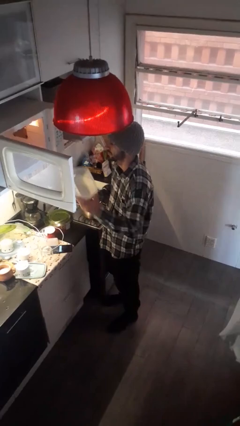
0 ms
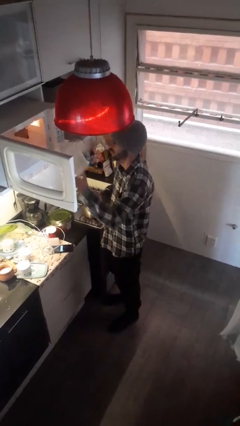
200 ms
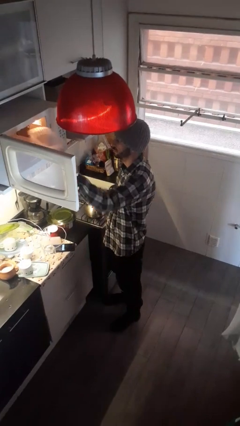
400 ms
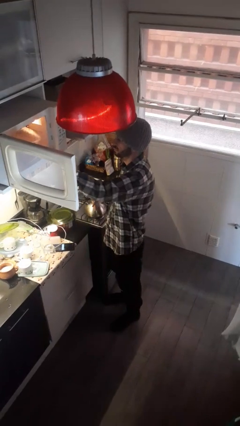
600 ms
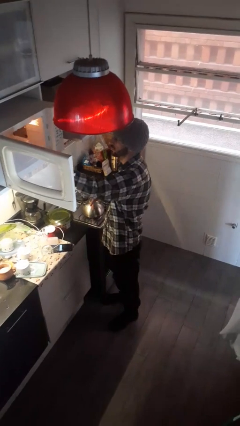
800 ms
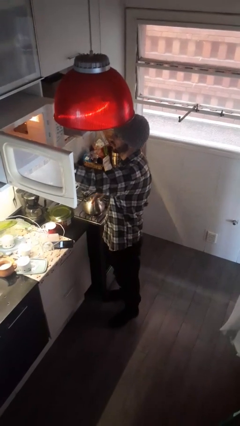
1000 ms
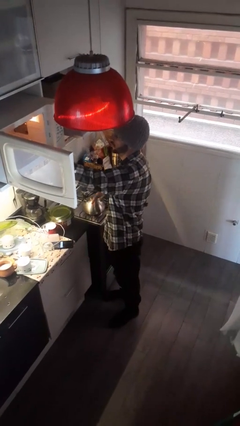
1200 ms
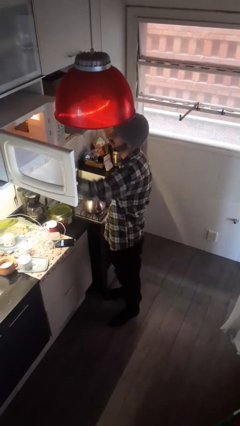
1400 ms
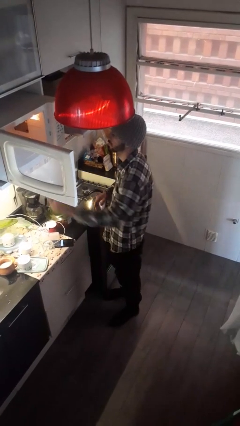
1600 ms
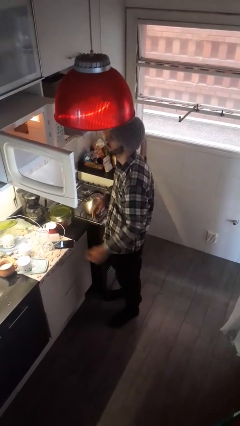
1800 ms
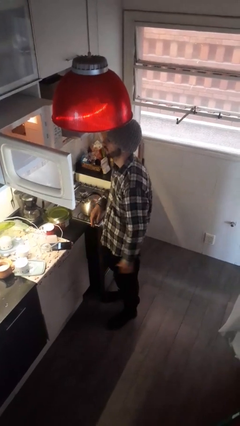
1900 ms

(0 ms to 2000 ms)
person puts object into microwave

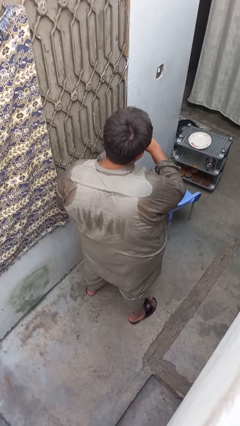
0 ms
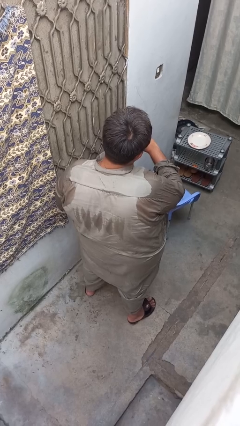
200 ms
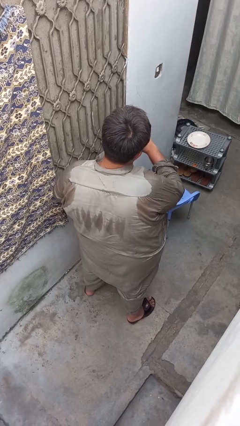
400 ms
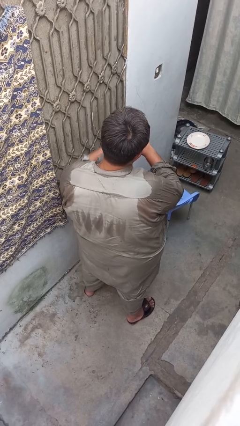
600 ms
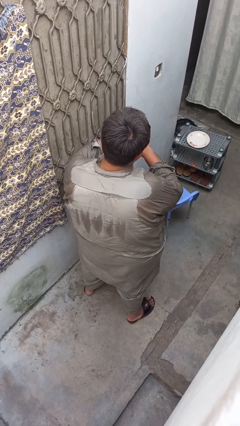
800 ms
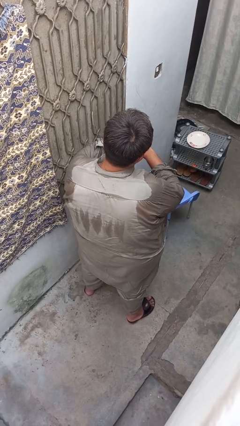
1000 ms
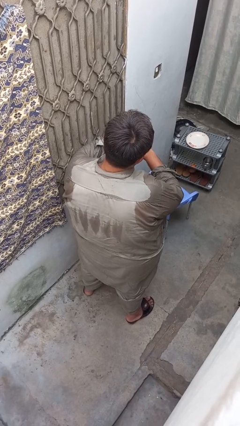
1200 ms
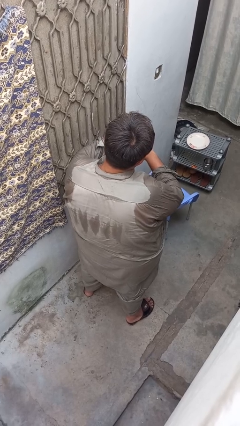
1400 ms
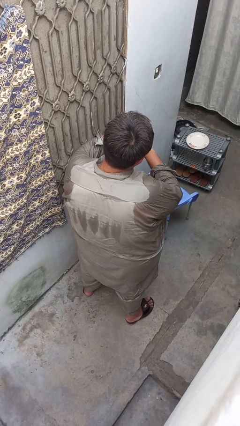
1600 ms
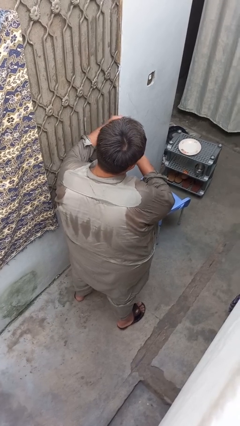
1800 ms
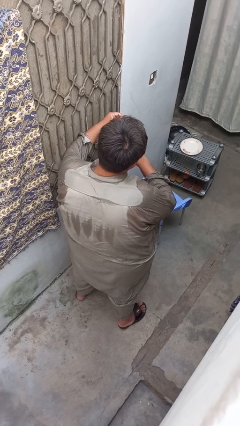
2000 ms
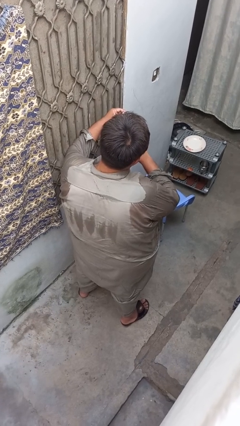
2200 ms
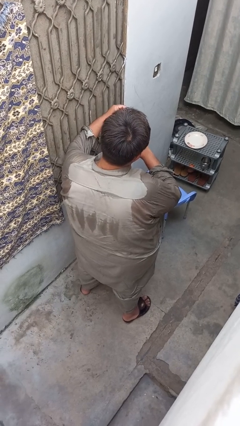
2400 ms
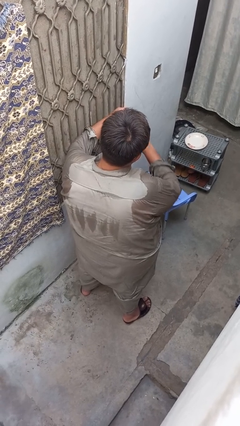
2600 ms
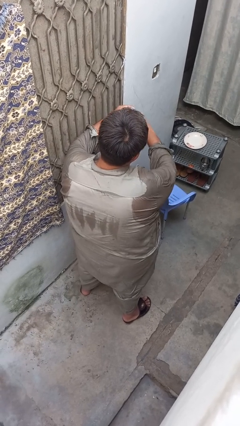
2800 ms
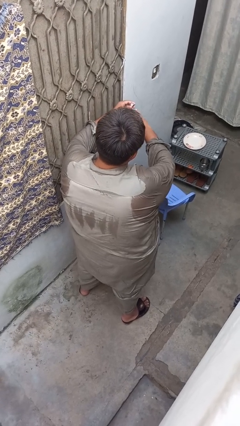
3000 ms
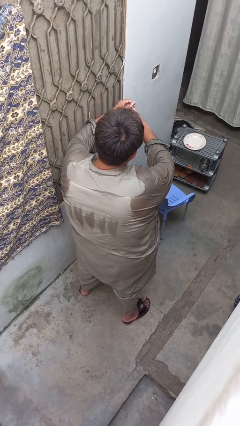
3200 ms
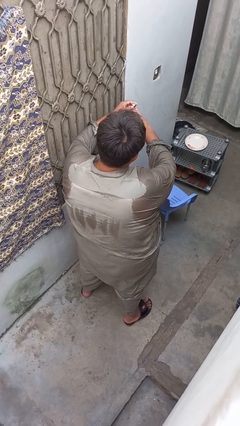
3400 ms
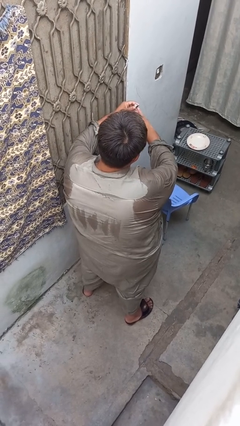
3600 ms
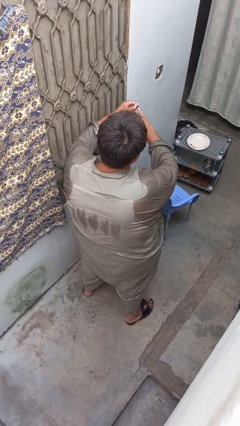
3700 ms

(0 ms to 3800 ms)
person takes off ring

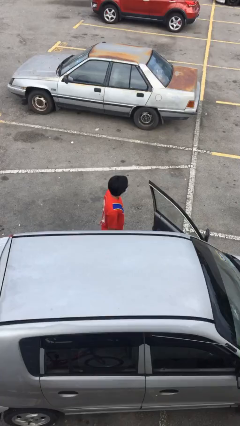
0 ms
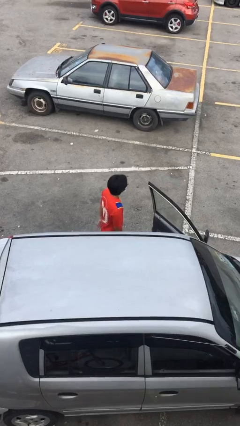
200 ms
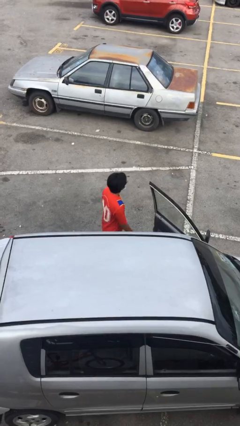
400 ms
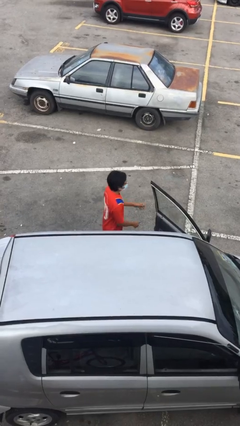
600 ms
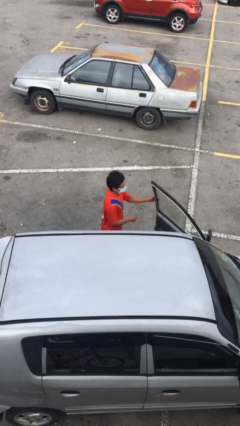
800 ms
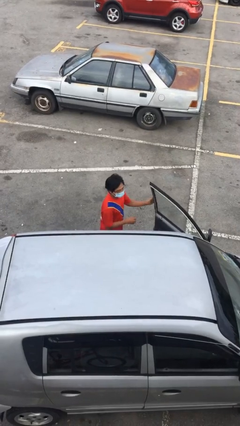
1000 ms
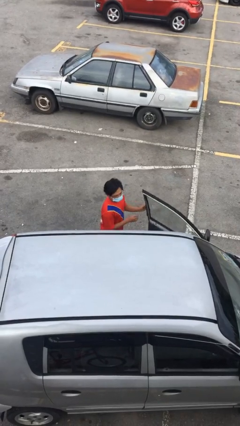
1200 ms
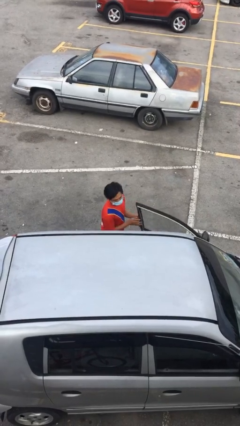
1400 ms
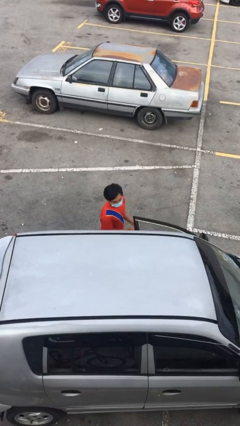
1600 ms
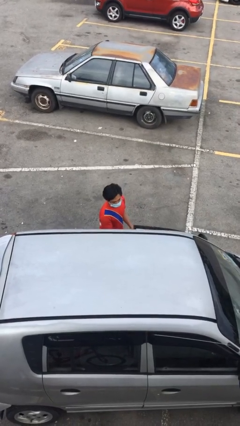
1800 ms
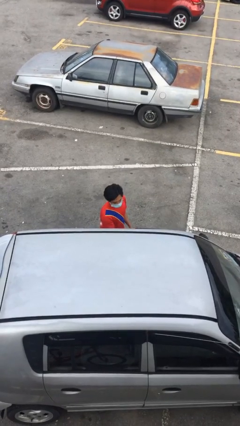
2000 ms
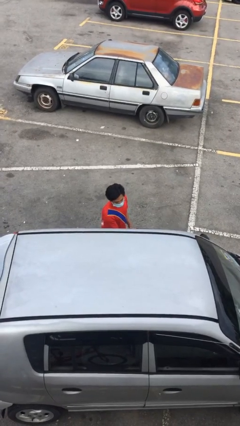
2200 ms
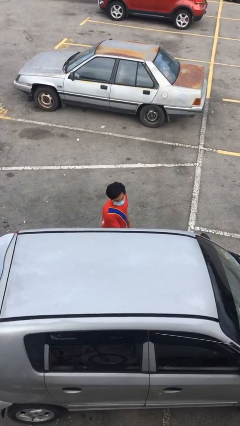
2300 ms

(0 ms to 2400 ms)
person closes car door

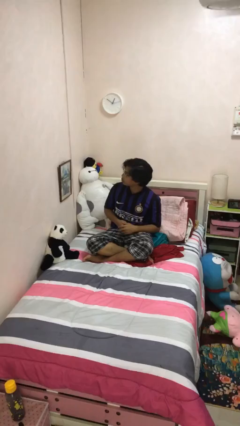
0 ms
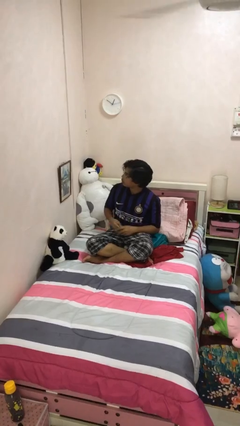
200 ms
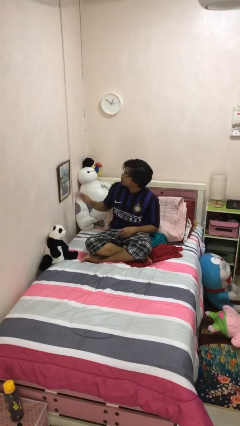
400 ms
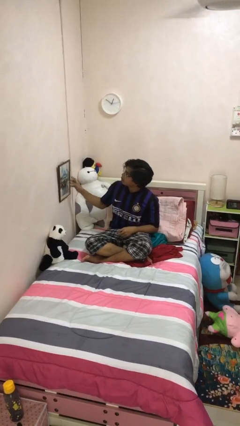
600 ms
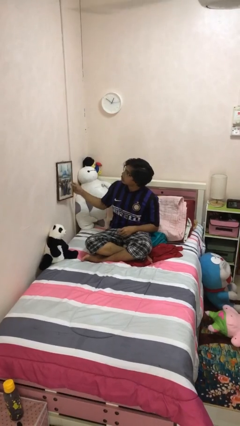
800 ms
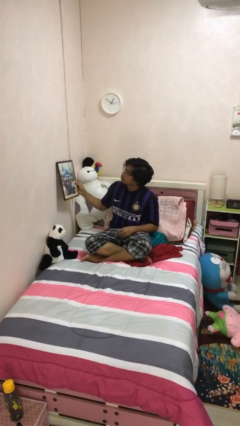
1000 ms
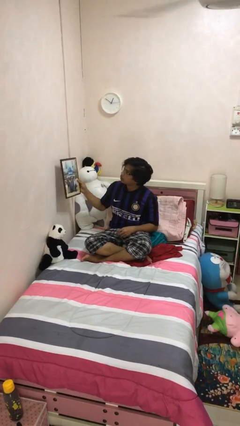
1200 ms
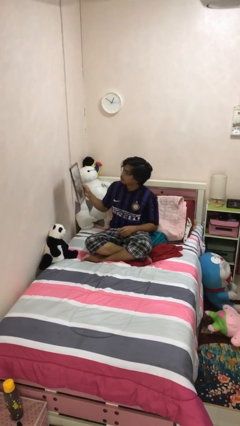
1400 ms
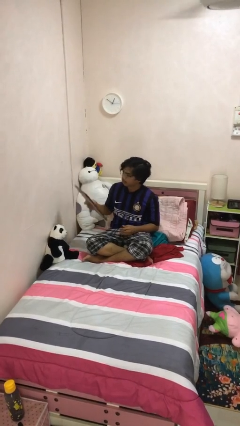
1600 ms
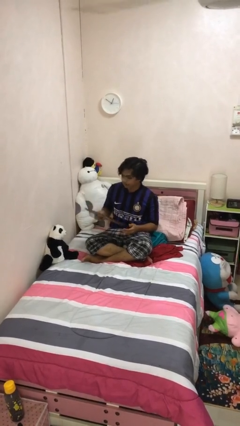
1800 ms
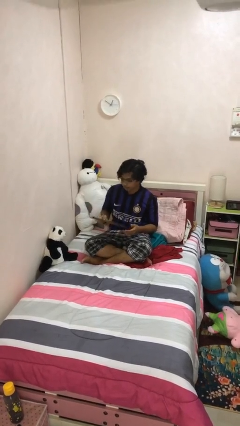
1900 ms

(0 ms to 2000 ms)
person takes down picture frame

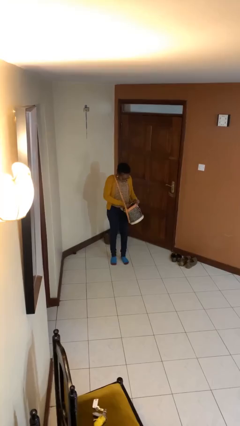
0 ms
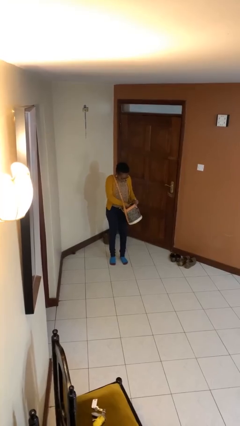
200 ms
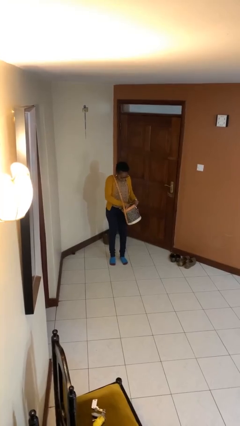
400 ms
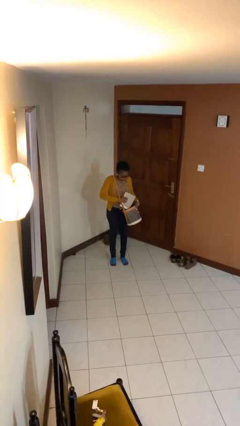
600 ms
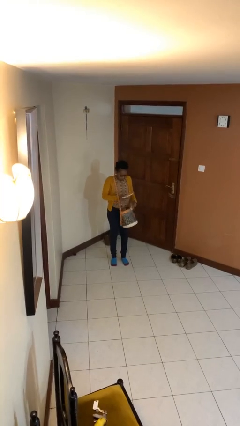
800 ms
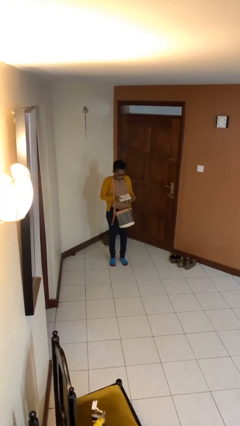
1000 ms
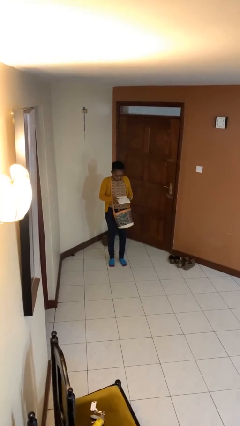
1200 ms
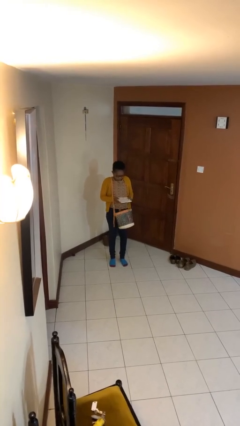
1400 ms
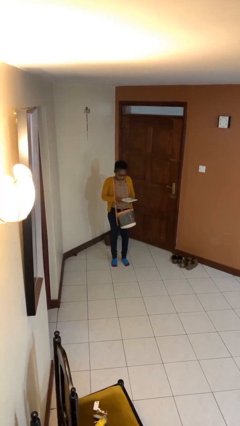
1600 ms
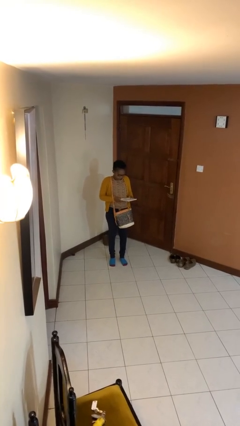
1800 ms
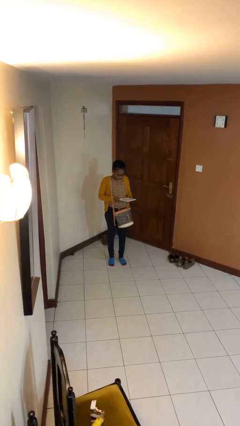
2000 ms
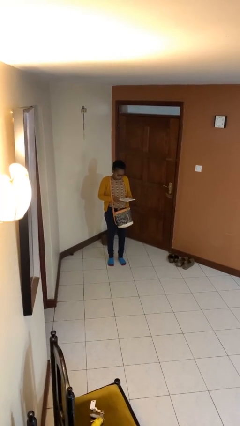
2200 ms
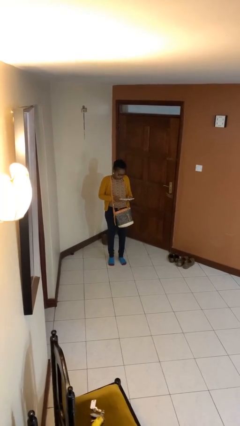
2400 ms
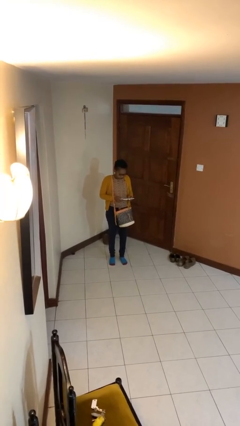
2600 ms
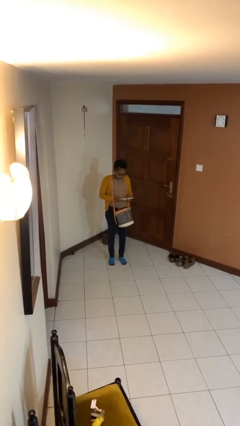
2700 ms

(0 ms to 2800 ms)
person takes object from purse

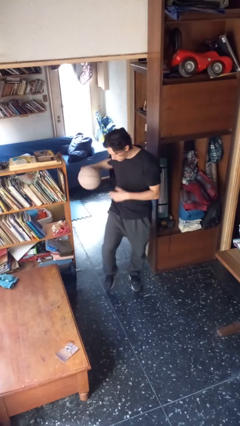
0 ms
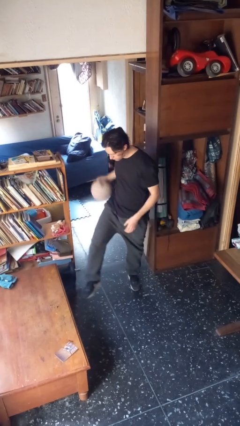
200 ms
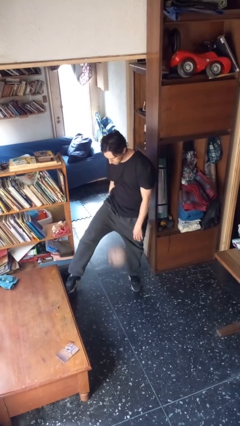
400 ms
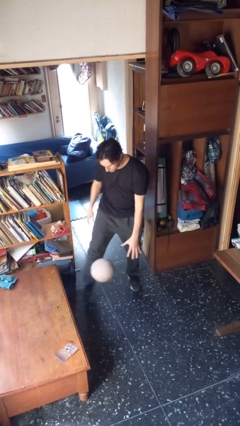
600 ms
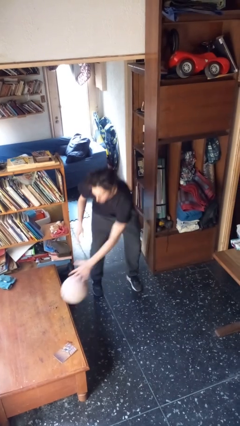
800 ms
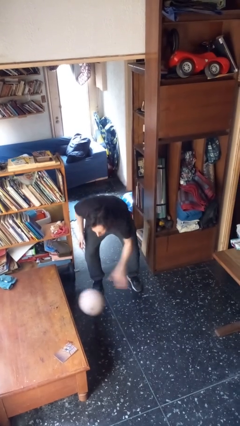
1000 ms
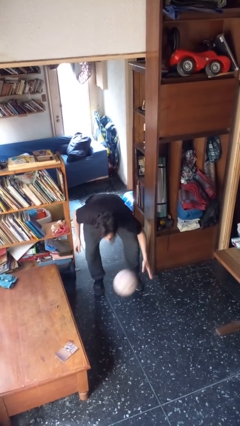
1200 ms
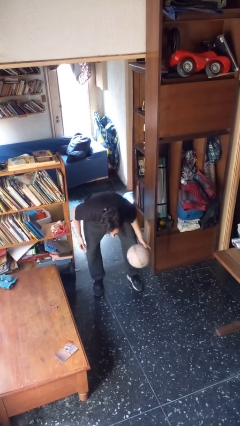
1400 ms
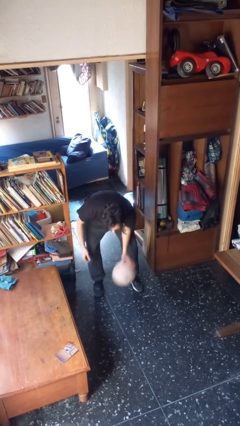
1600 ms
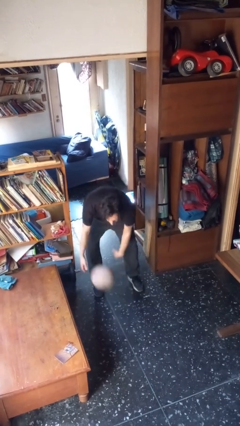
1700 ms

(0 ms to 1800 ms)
person bounces ball on floor

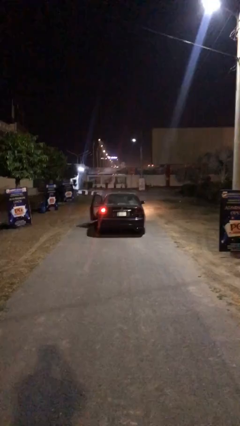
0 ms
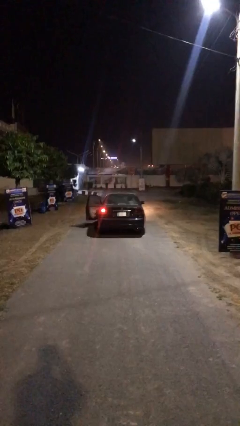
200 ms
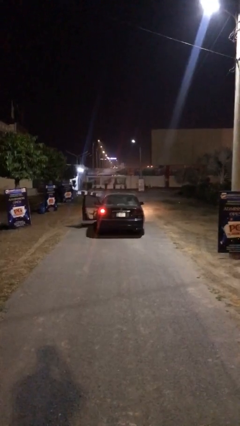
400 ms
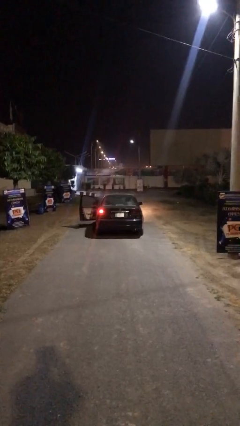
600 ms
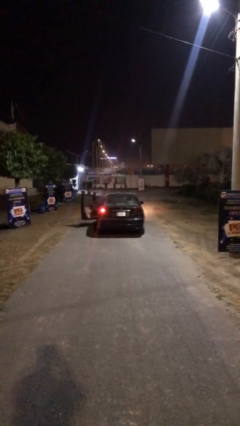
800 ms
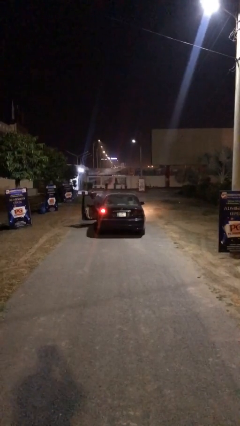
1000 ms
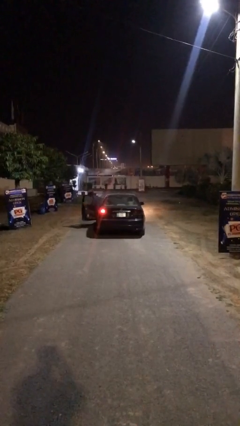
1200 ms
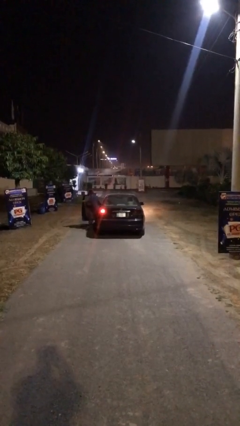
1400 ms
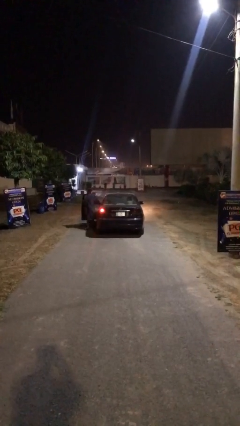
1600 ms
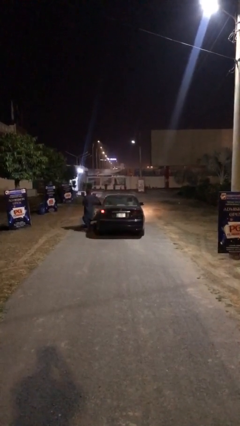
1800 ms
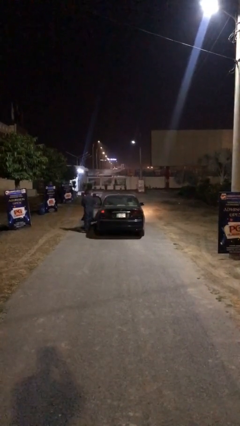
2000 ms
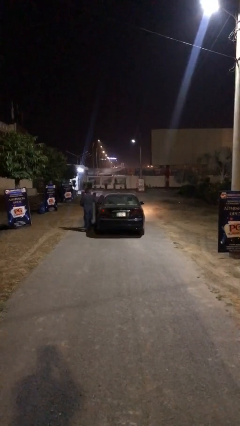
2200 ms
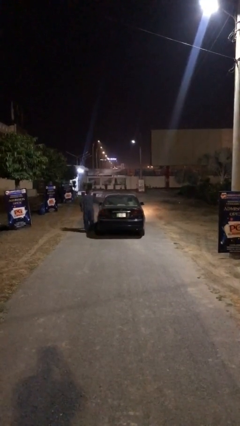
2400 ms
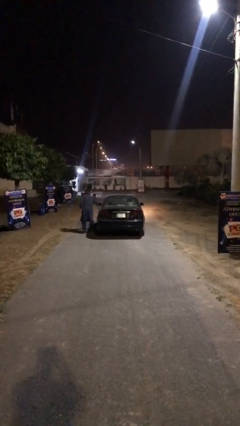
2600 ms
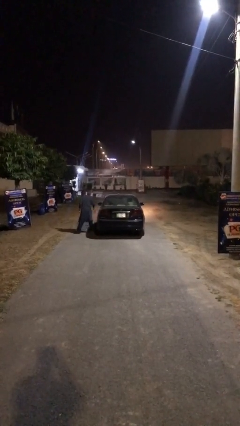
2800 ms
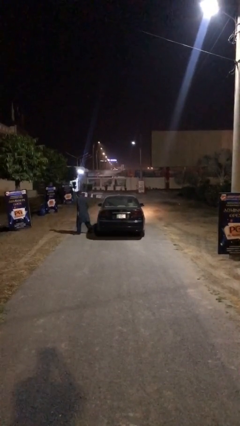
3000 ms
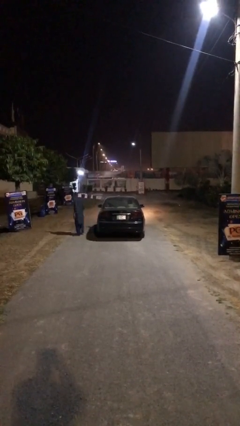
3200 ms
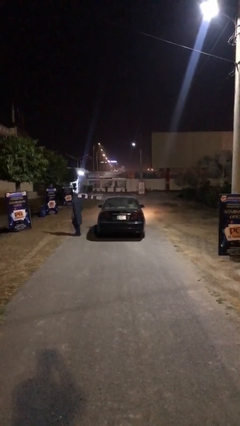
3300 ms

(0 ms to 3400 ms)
car drops off person
